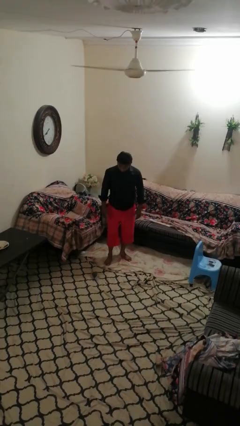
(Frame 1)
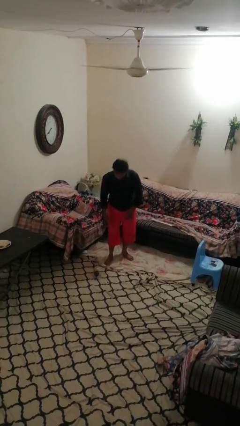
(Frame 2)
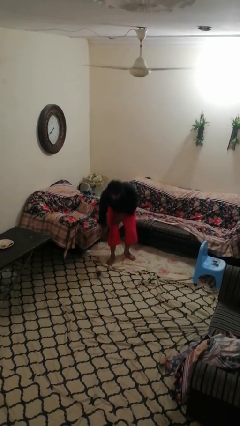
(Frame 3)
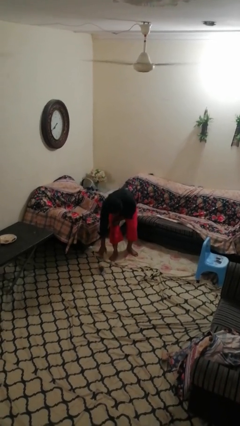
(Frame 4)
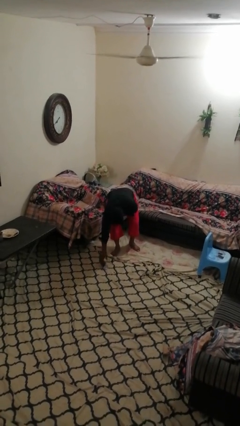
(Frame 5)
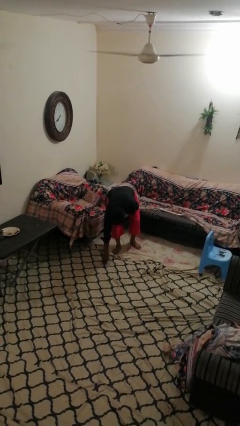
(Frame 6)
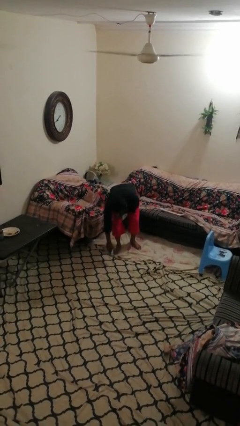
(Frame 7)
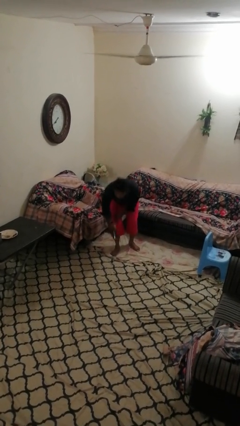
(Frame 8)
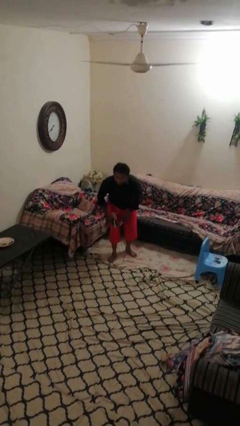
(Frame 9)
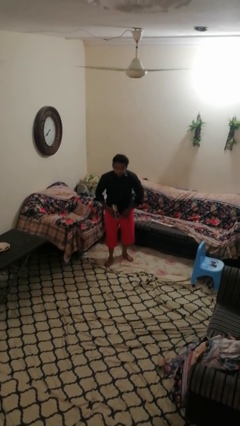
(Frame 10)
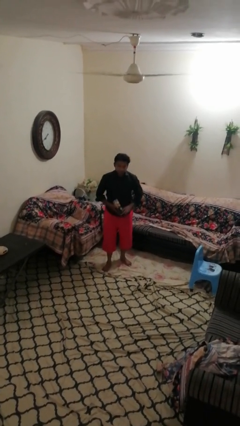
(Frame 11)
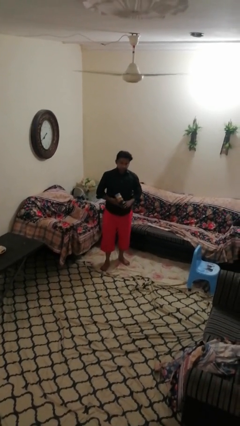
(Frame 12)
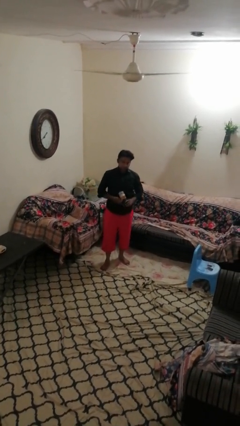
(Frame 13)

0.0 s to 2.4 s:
person picks up object from floor

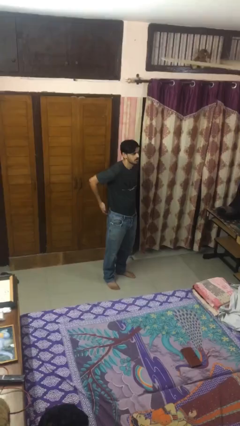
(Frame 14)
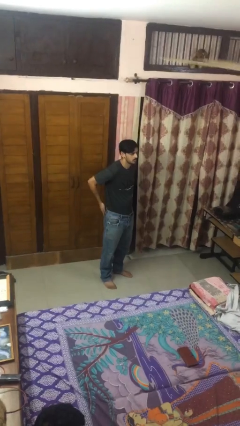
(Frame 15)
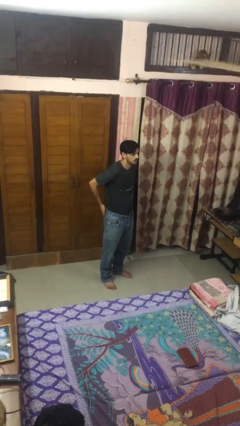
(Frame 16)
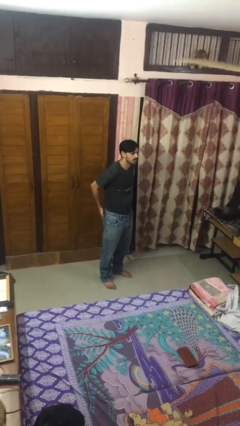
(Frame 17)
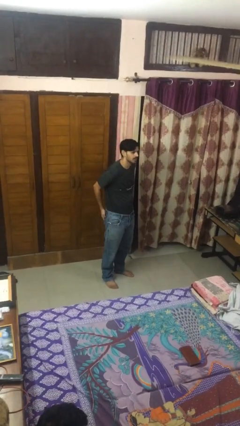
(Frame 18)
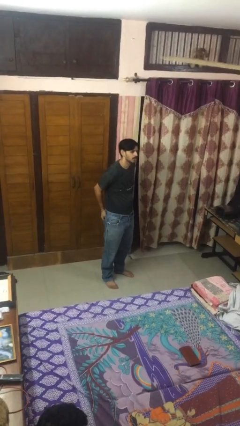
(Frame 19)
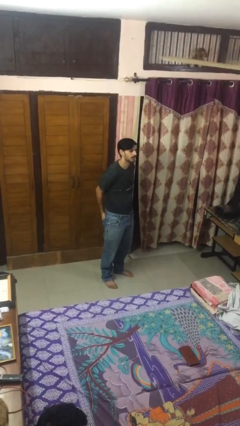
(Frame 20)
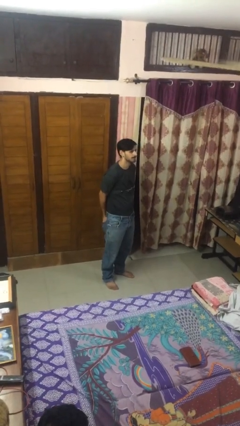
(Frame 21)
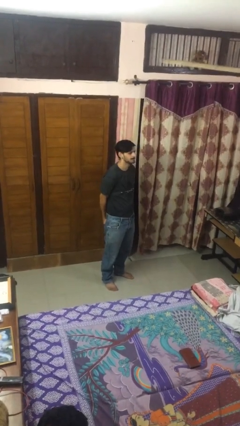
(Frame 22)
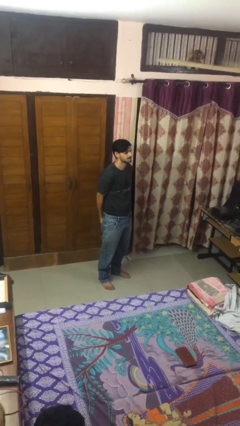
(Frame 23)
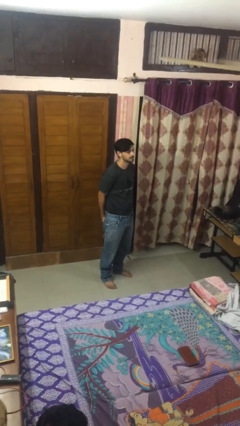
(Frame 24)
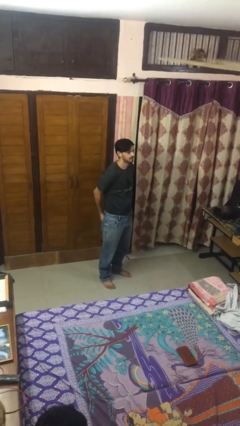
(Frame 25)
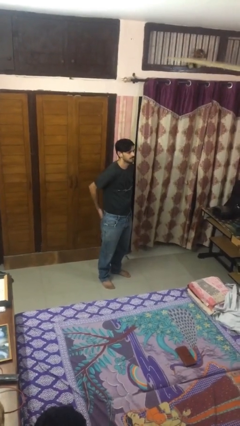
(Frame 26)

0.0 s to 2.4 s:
person puts hands in back pockets

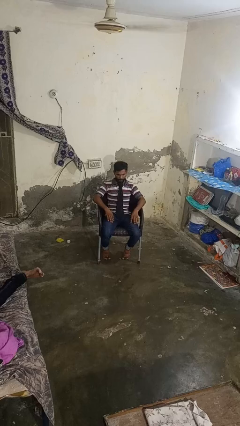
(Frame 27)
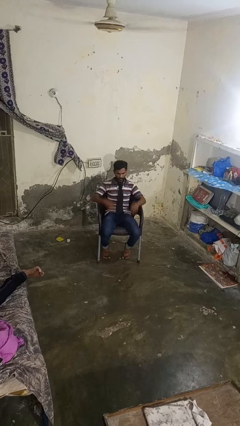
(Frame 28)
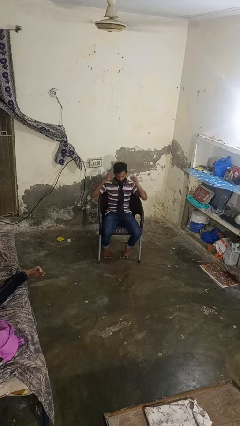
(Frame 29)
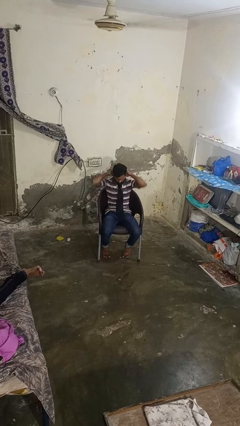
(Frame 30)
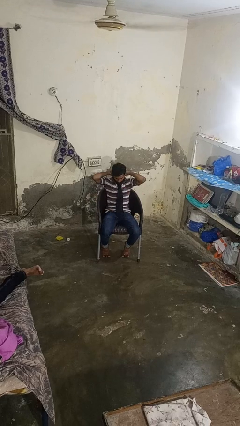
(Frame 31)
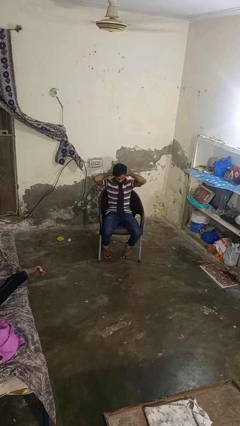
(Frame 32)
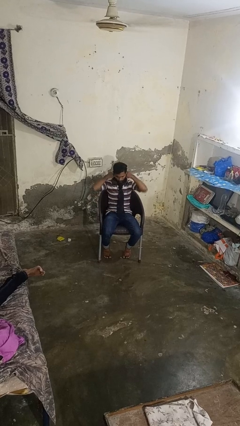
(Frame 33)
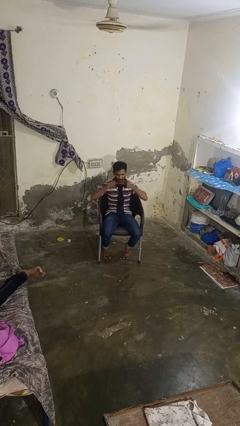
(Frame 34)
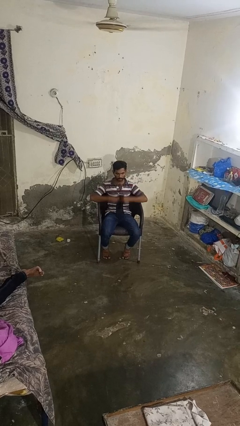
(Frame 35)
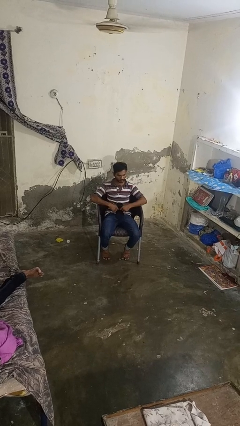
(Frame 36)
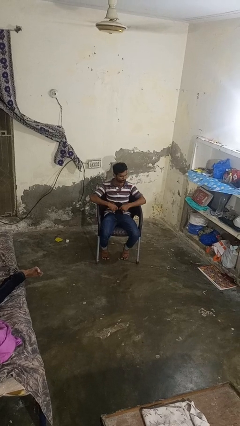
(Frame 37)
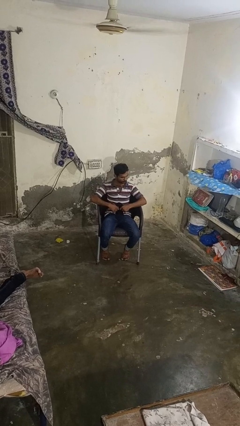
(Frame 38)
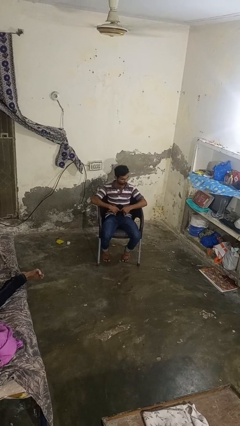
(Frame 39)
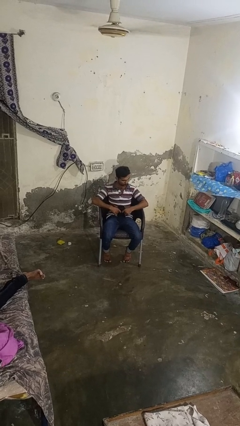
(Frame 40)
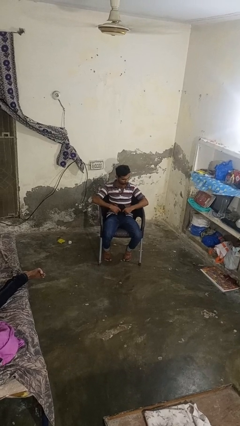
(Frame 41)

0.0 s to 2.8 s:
person takes off necktie

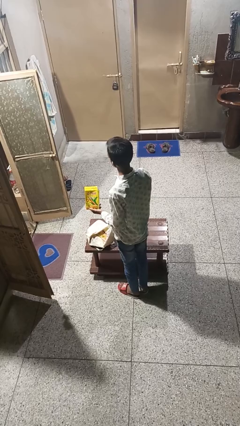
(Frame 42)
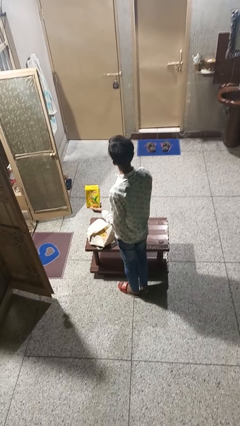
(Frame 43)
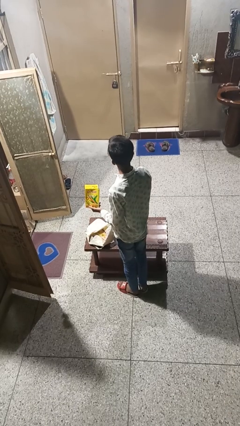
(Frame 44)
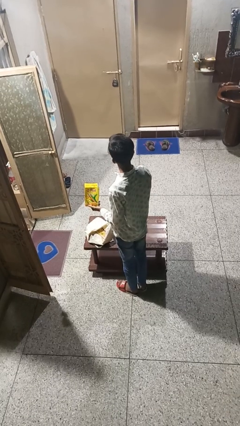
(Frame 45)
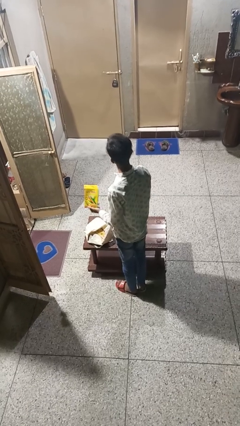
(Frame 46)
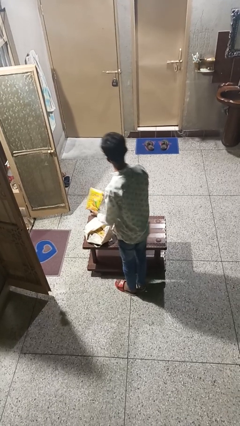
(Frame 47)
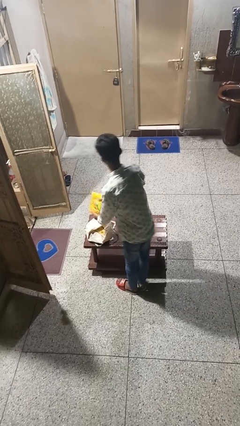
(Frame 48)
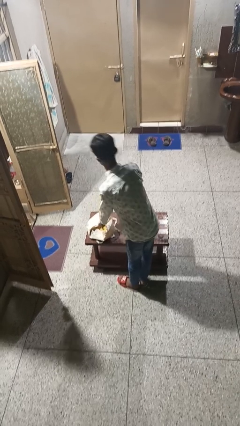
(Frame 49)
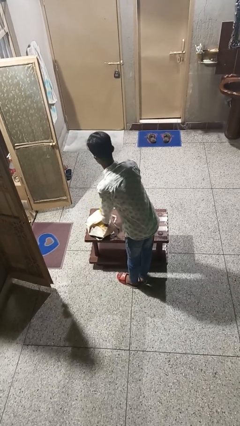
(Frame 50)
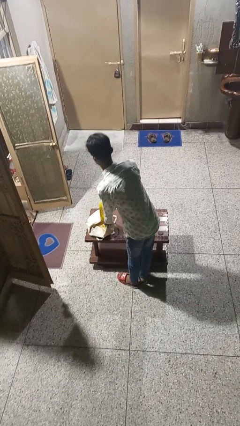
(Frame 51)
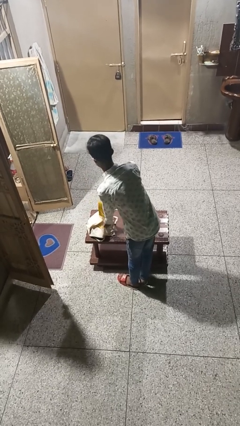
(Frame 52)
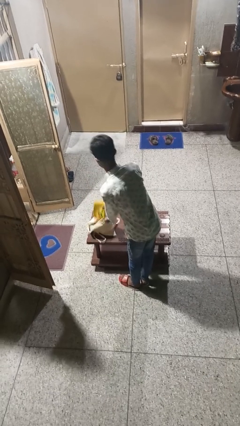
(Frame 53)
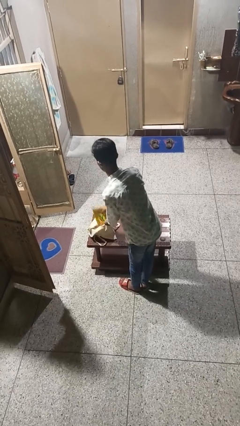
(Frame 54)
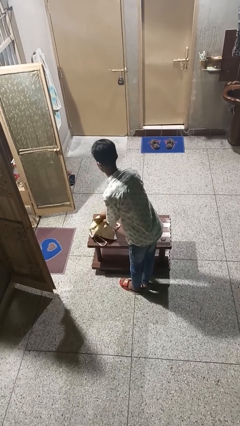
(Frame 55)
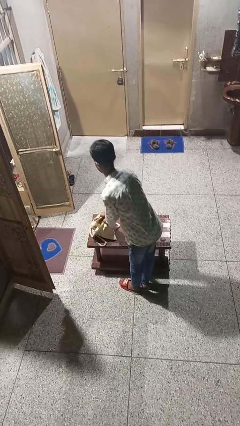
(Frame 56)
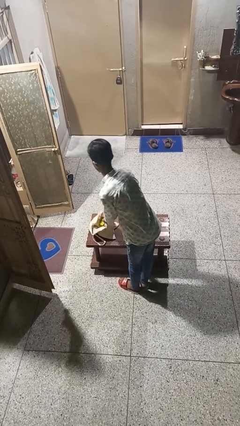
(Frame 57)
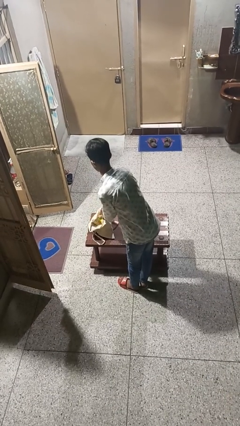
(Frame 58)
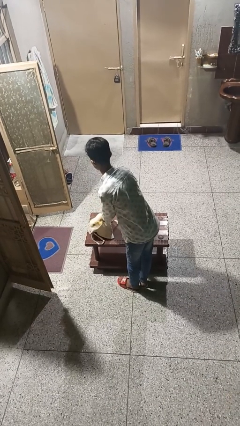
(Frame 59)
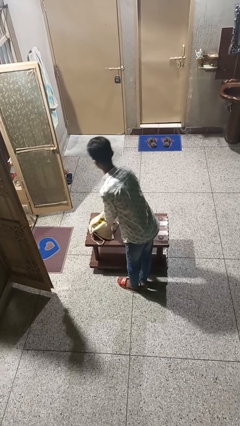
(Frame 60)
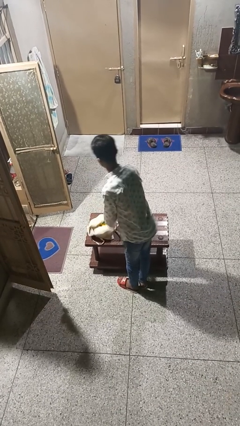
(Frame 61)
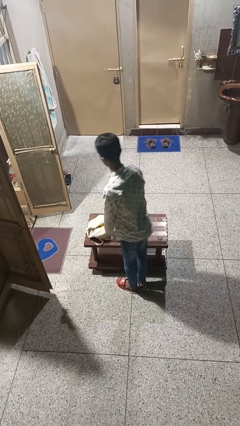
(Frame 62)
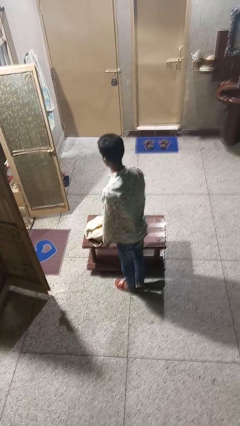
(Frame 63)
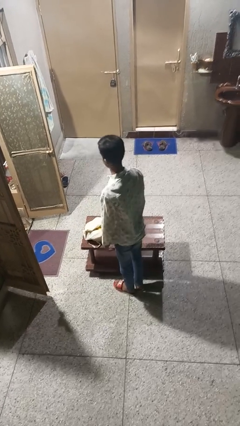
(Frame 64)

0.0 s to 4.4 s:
person puts object into bag

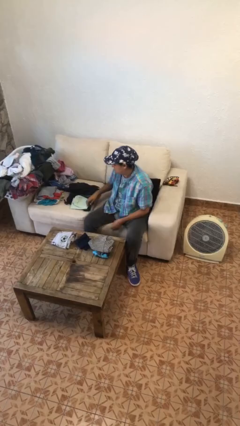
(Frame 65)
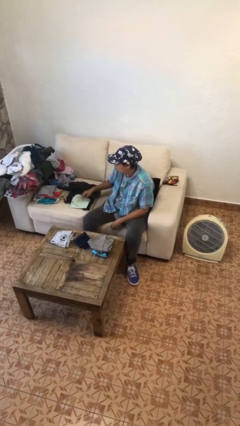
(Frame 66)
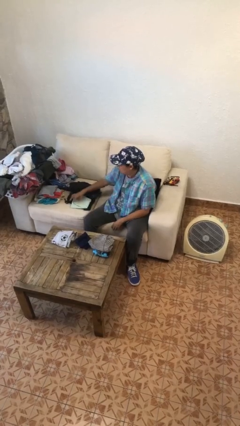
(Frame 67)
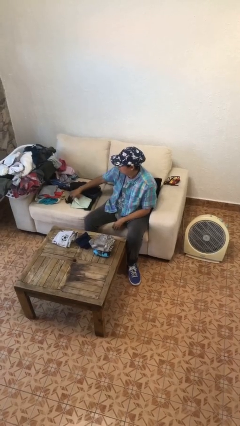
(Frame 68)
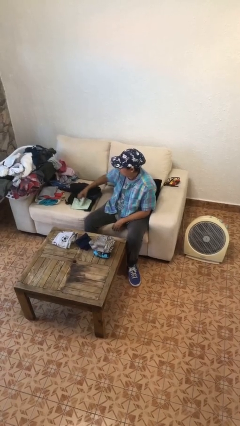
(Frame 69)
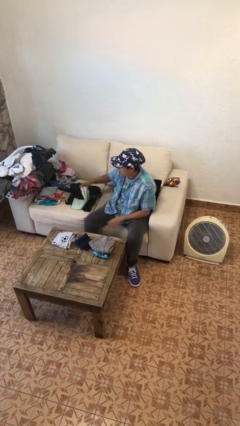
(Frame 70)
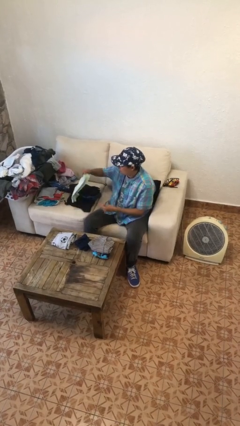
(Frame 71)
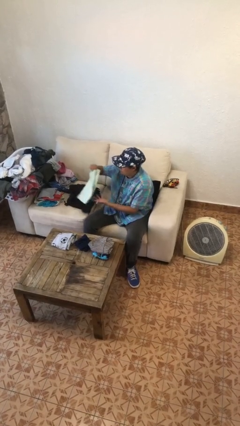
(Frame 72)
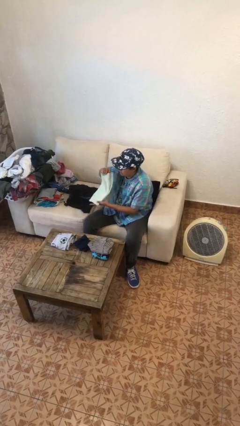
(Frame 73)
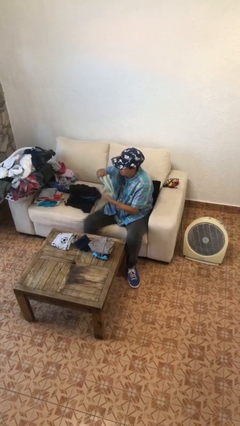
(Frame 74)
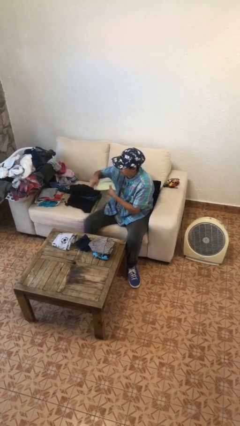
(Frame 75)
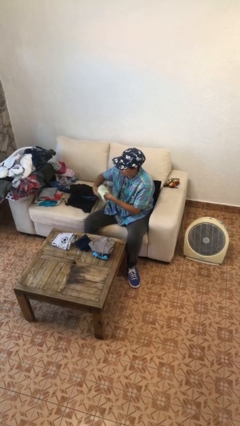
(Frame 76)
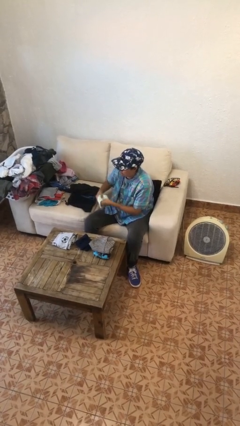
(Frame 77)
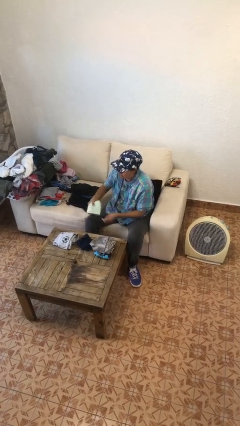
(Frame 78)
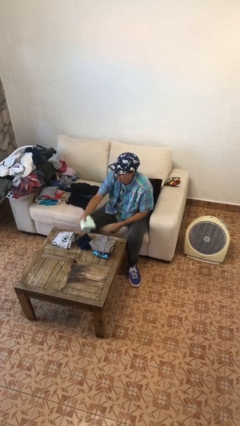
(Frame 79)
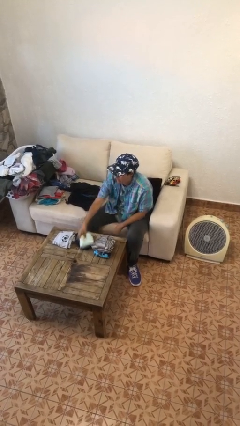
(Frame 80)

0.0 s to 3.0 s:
person folds pants

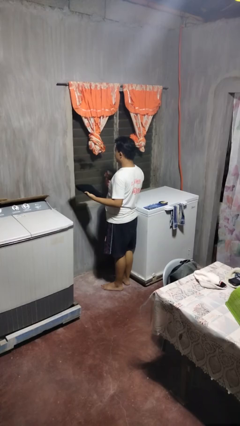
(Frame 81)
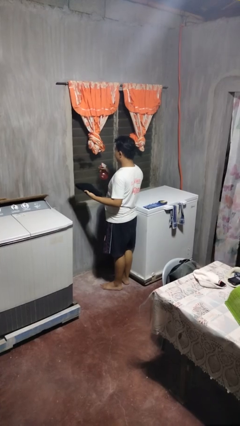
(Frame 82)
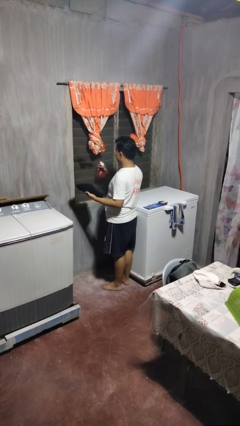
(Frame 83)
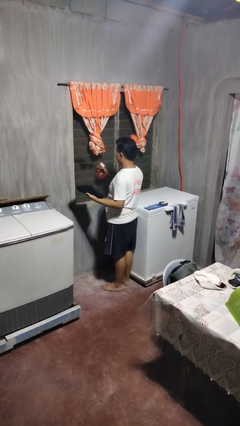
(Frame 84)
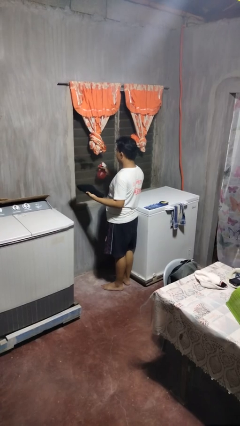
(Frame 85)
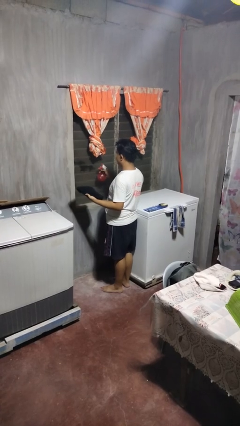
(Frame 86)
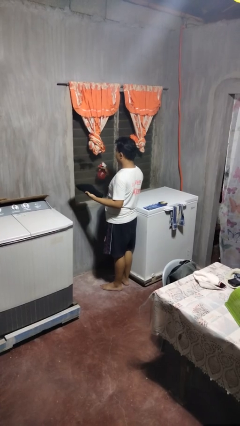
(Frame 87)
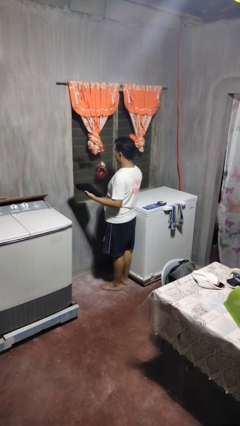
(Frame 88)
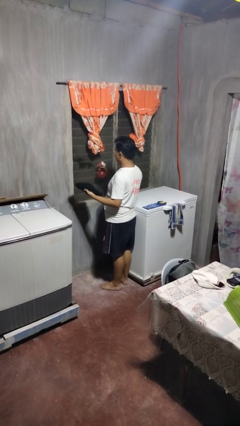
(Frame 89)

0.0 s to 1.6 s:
person sprays from bottle

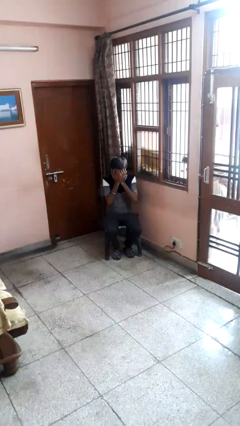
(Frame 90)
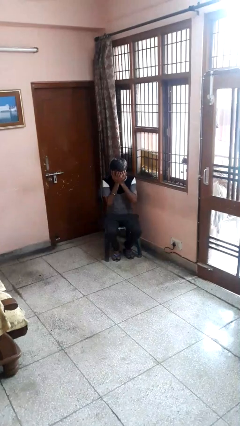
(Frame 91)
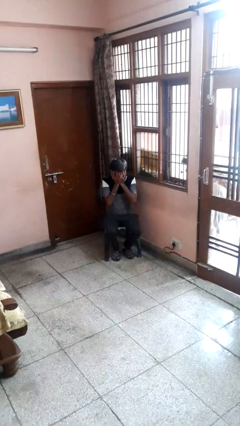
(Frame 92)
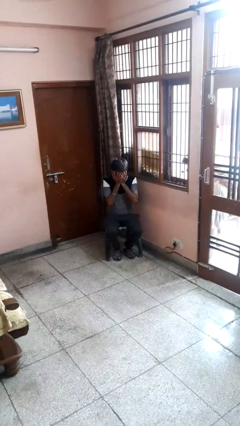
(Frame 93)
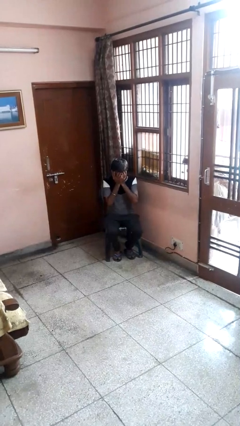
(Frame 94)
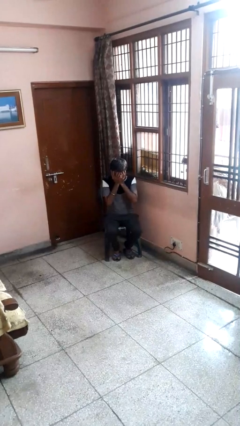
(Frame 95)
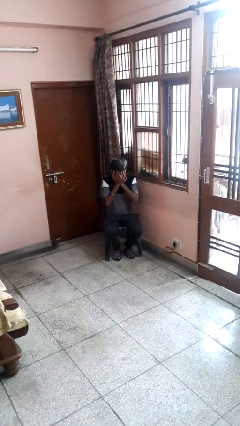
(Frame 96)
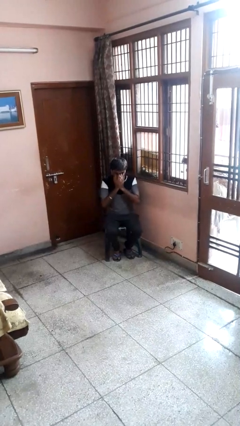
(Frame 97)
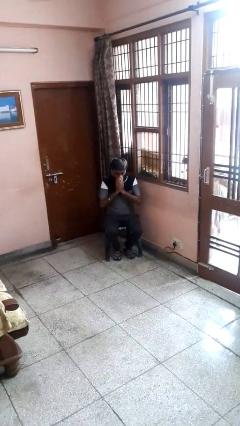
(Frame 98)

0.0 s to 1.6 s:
person covers face with hands
